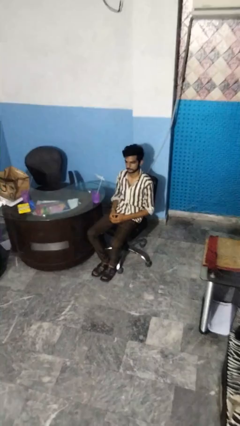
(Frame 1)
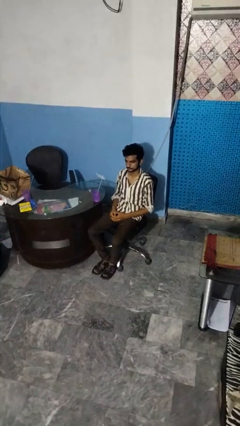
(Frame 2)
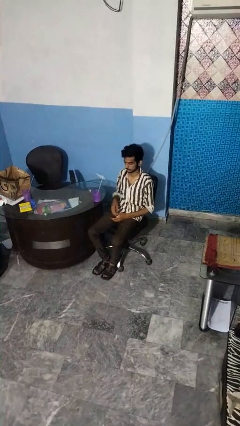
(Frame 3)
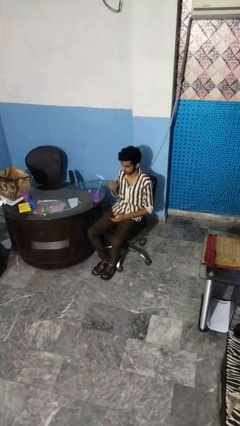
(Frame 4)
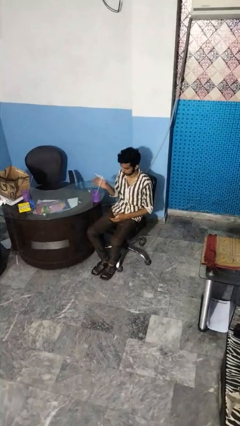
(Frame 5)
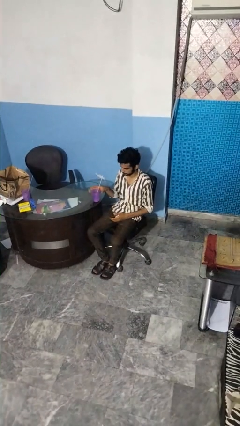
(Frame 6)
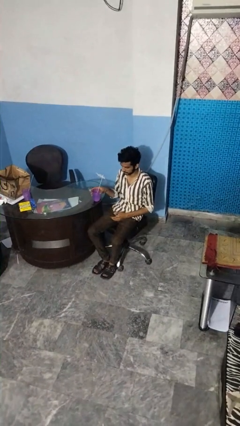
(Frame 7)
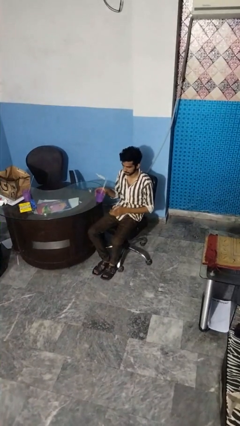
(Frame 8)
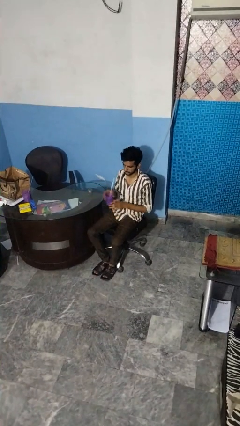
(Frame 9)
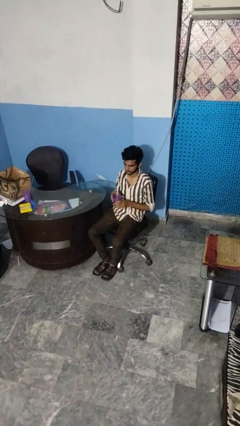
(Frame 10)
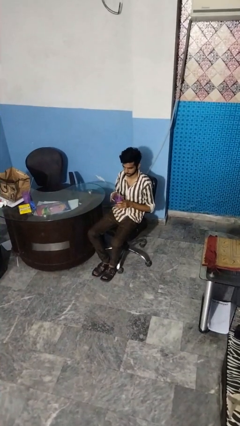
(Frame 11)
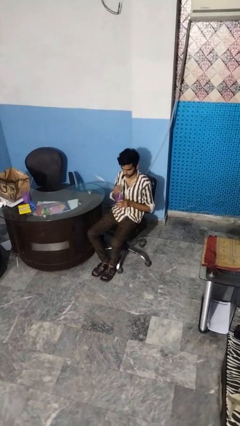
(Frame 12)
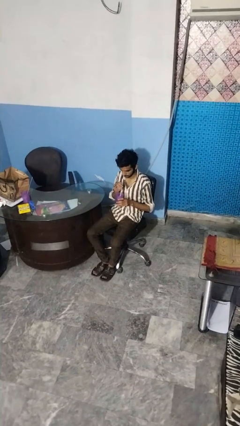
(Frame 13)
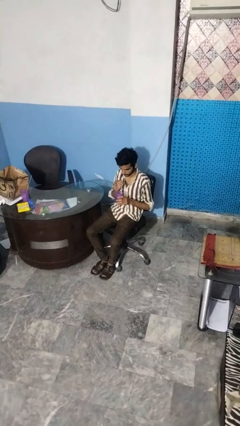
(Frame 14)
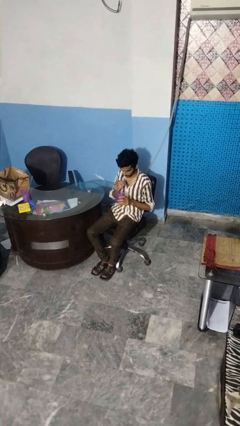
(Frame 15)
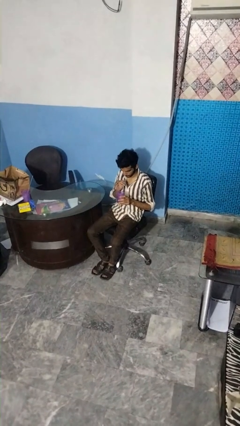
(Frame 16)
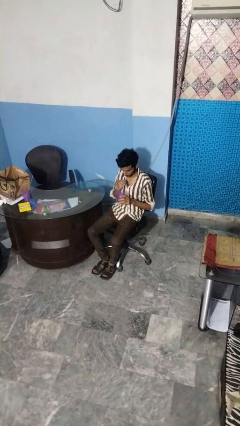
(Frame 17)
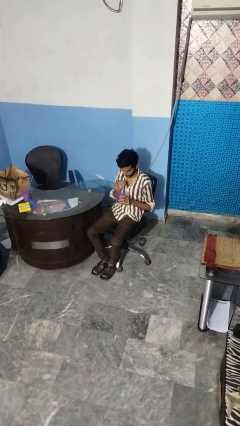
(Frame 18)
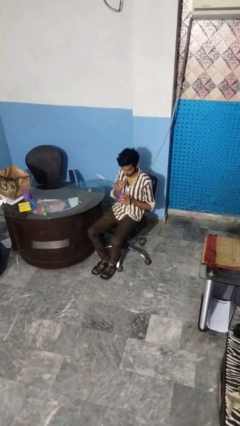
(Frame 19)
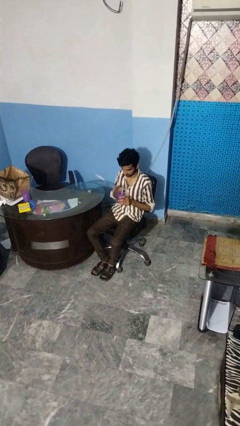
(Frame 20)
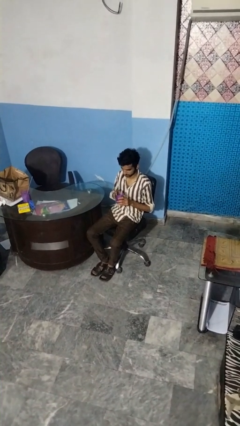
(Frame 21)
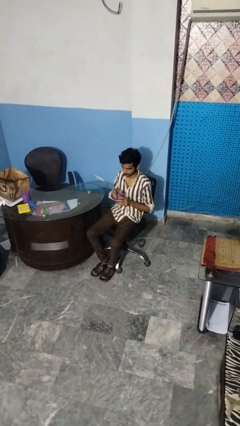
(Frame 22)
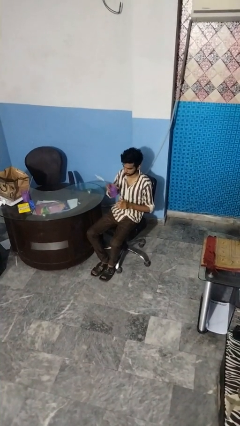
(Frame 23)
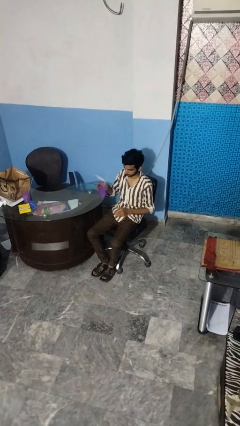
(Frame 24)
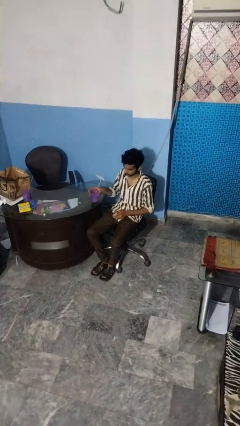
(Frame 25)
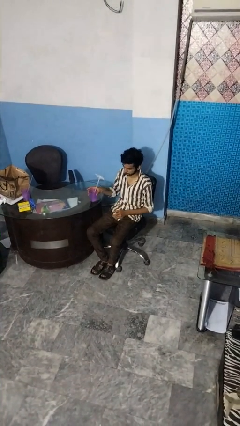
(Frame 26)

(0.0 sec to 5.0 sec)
person drinks from straw

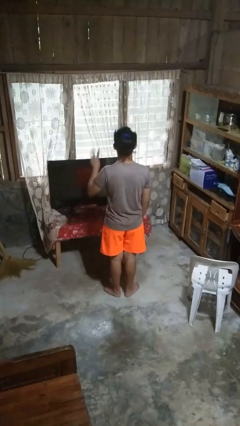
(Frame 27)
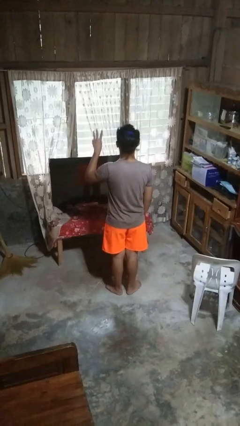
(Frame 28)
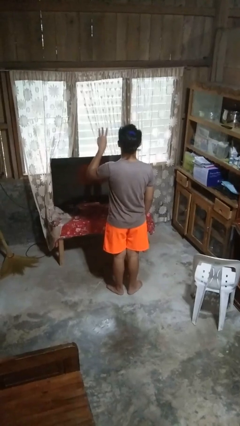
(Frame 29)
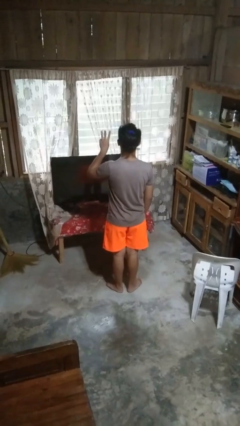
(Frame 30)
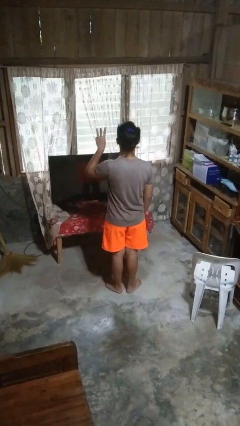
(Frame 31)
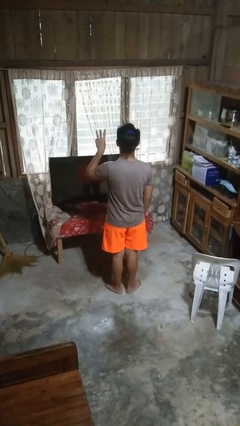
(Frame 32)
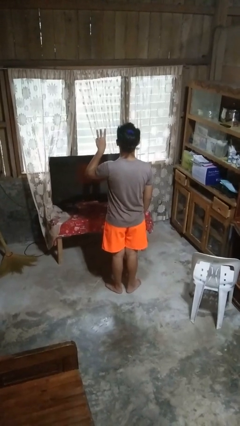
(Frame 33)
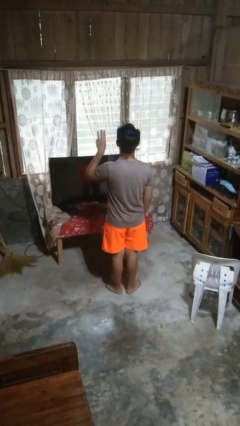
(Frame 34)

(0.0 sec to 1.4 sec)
person gestures number three

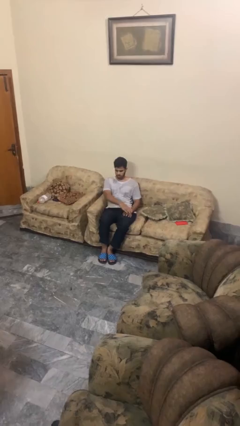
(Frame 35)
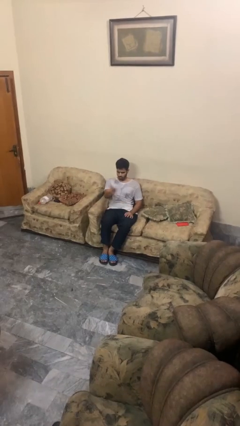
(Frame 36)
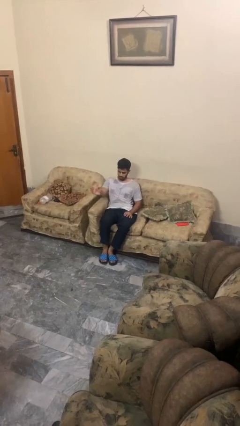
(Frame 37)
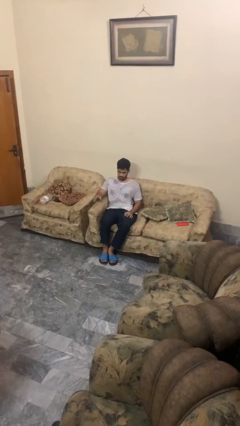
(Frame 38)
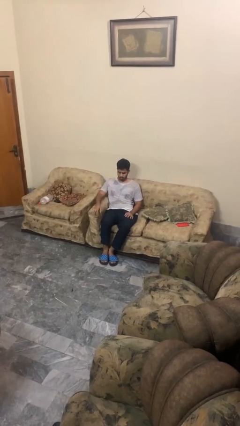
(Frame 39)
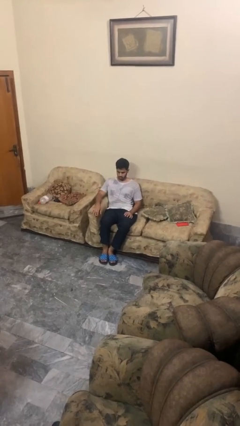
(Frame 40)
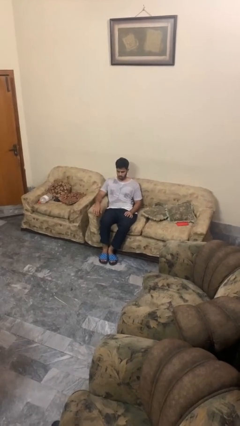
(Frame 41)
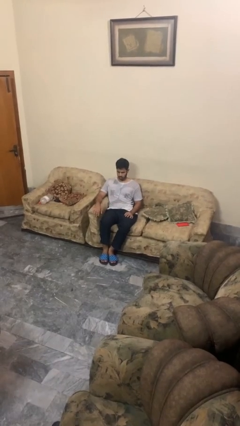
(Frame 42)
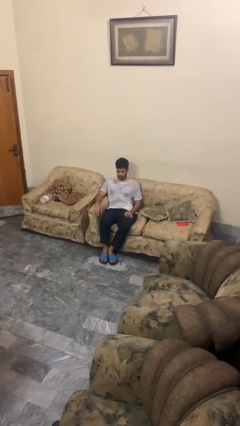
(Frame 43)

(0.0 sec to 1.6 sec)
person gestures swipe right

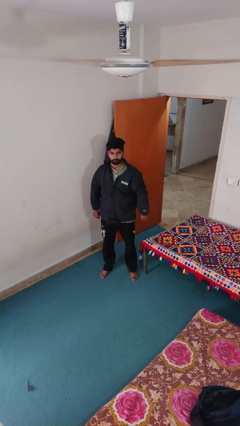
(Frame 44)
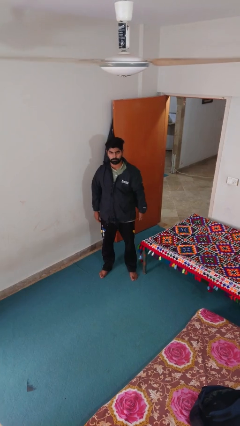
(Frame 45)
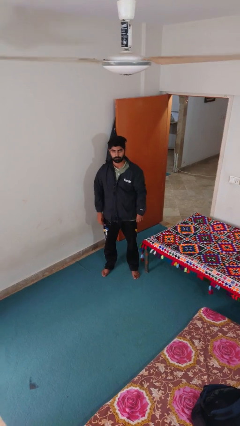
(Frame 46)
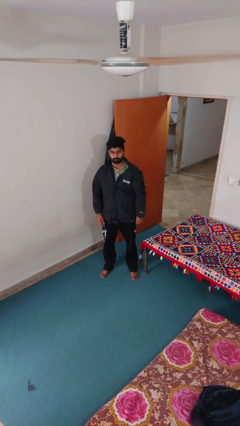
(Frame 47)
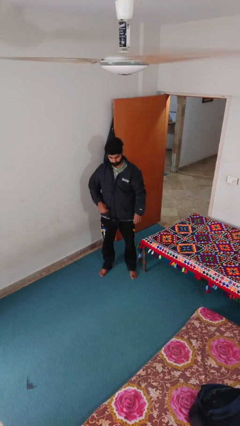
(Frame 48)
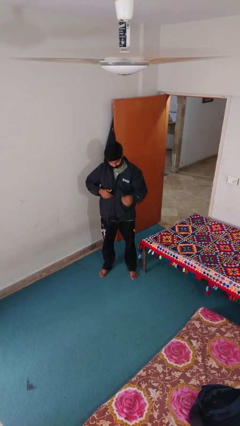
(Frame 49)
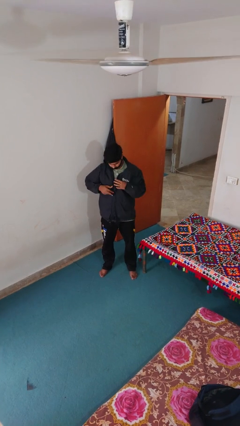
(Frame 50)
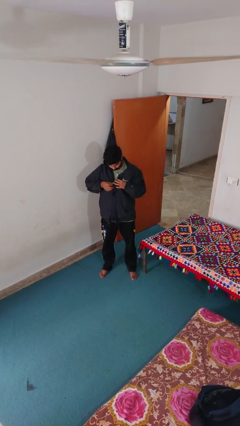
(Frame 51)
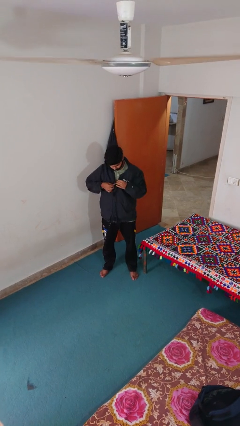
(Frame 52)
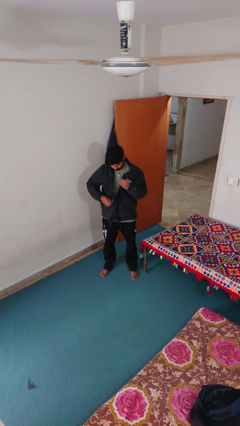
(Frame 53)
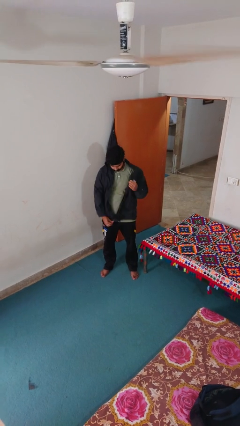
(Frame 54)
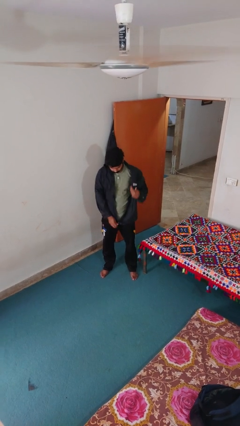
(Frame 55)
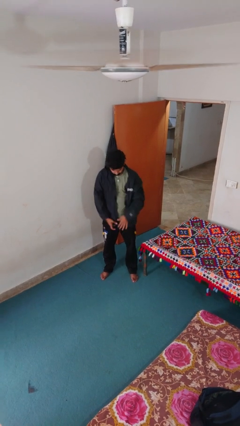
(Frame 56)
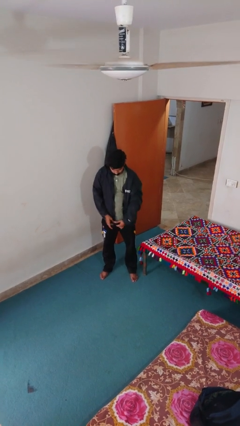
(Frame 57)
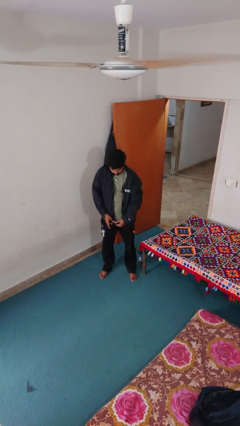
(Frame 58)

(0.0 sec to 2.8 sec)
person unzips jacket

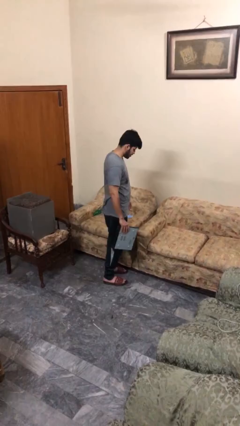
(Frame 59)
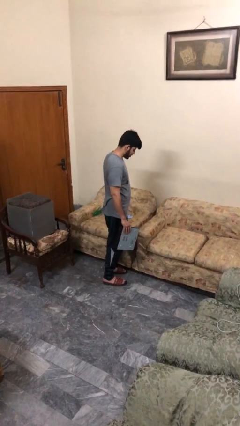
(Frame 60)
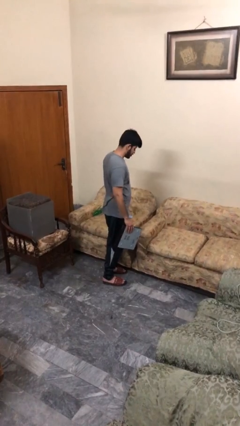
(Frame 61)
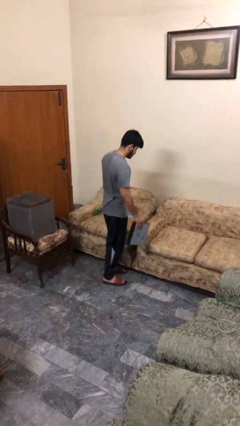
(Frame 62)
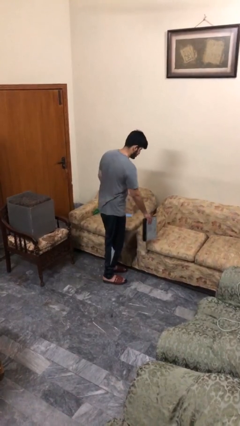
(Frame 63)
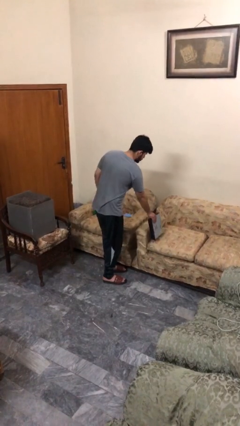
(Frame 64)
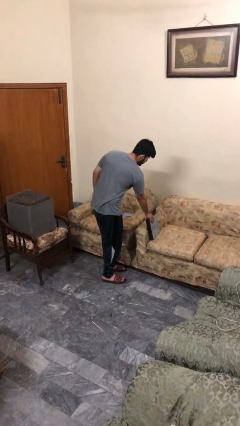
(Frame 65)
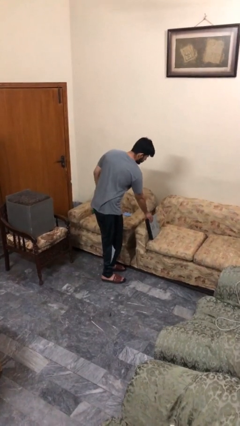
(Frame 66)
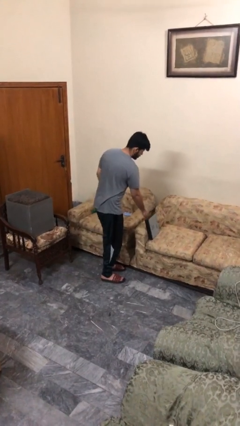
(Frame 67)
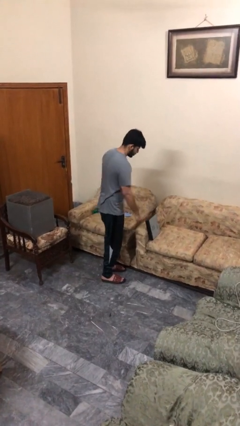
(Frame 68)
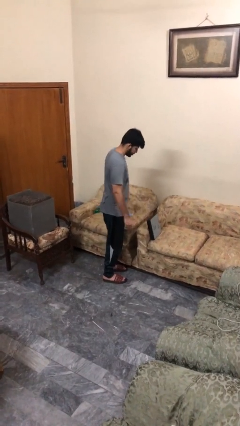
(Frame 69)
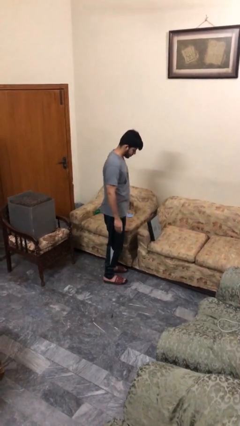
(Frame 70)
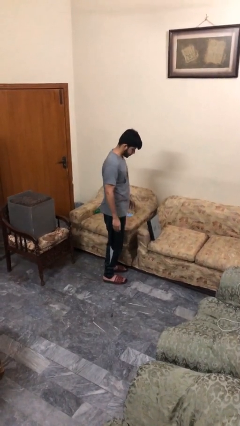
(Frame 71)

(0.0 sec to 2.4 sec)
person puts down object on couch

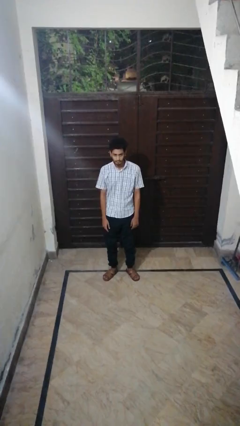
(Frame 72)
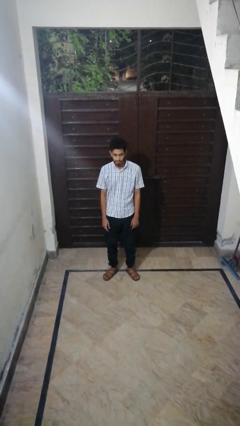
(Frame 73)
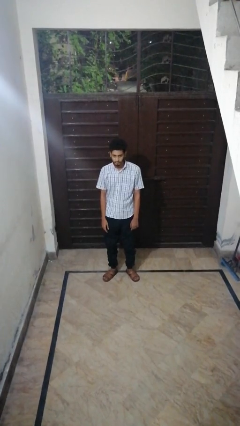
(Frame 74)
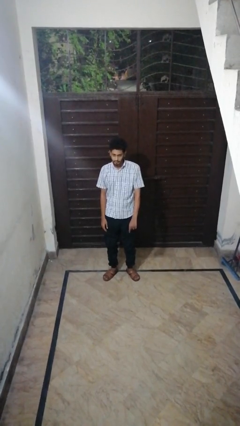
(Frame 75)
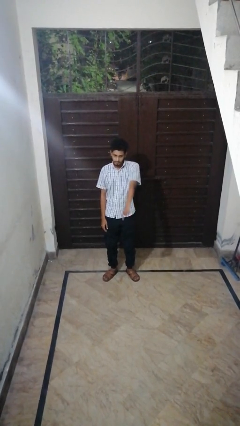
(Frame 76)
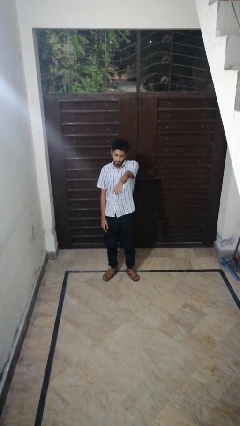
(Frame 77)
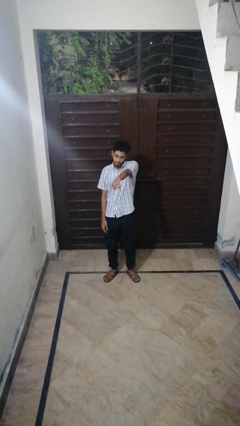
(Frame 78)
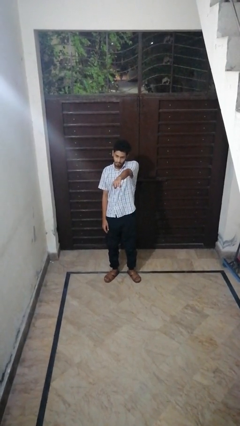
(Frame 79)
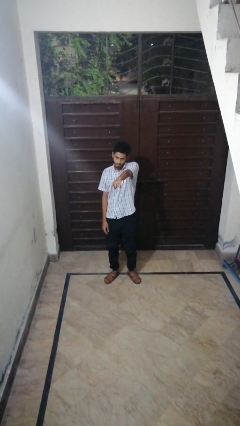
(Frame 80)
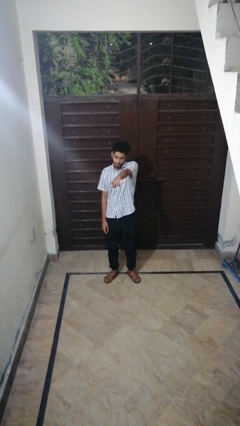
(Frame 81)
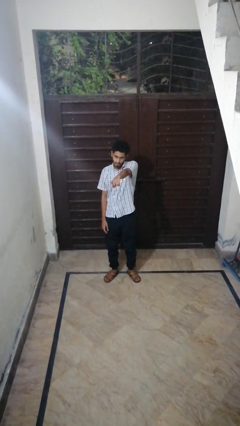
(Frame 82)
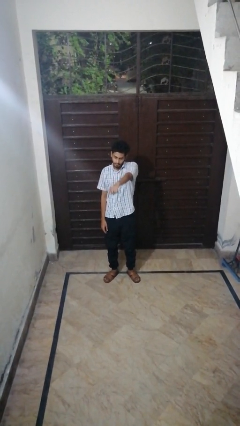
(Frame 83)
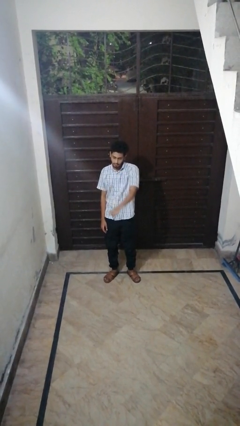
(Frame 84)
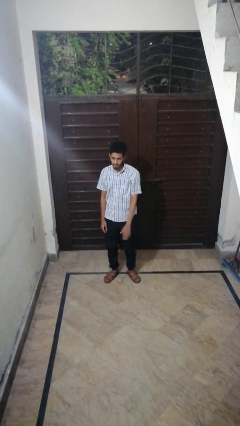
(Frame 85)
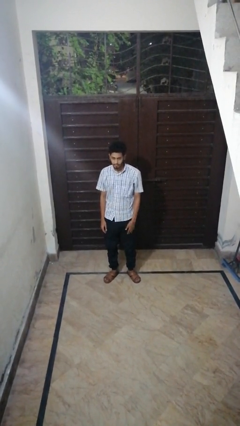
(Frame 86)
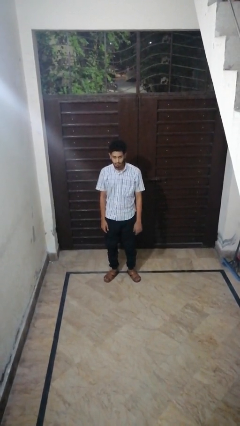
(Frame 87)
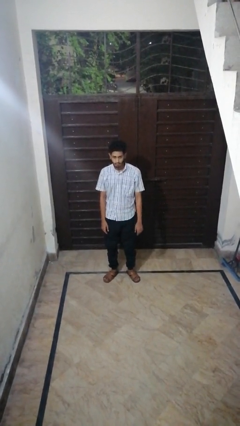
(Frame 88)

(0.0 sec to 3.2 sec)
person points at person

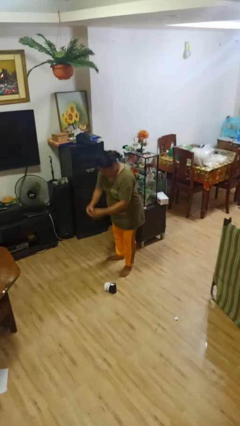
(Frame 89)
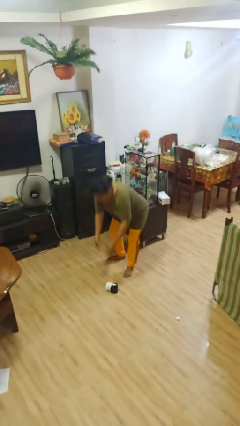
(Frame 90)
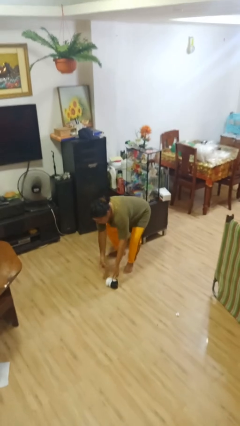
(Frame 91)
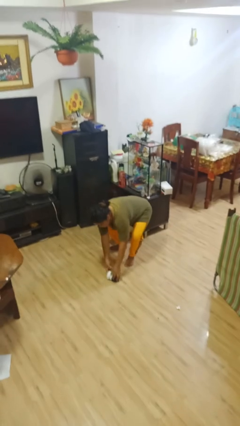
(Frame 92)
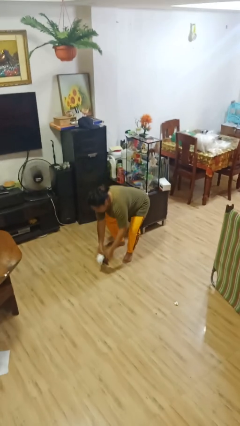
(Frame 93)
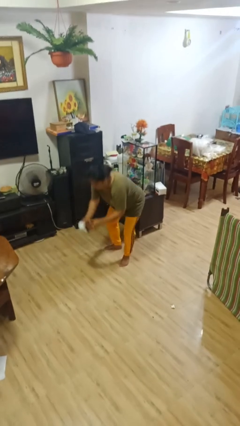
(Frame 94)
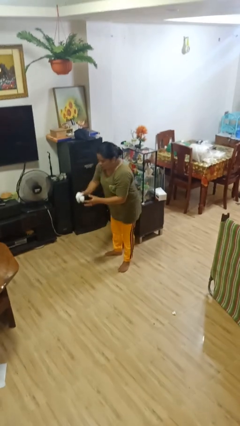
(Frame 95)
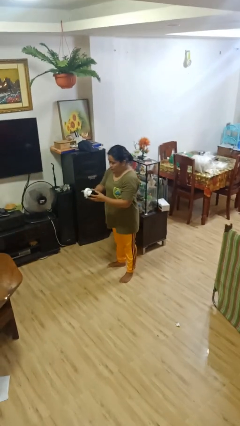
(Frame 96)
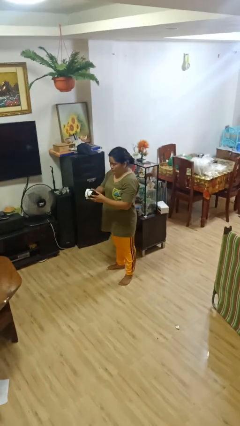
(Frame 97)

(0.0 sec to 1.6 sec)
person picks up object from floor
